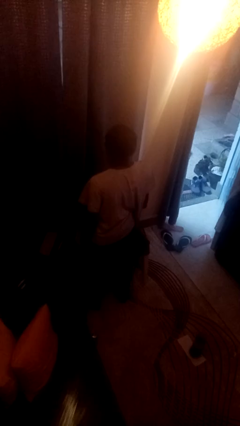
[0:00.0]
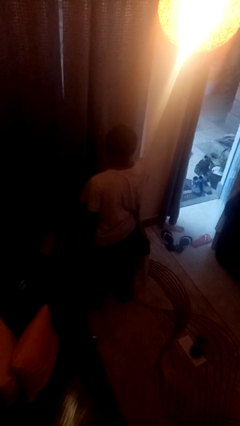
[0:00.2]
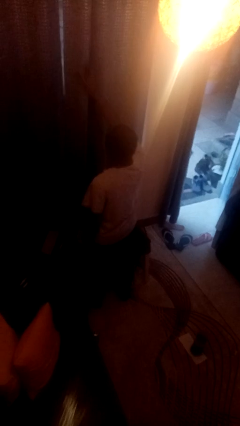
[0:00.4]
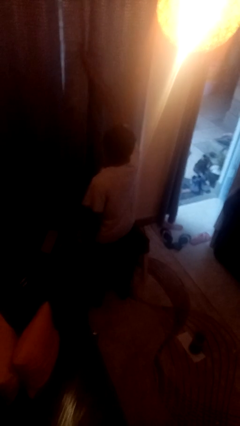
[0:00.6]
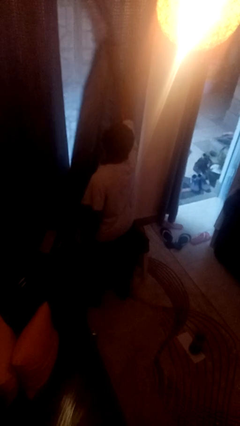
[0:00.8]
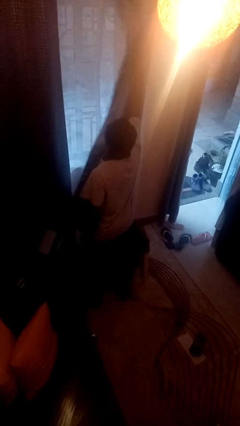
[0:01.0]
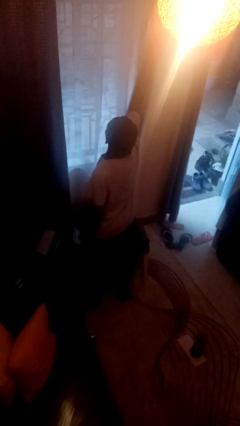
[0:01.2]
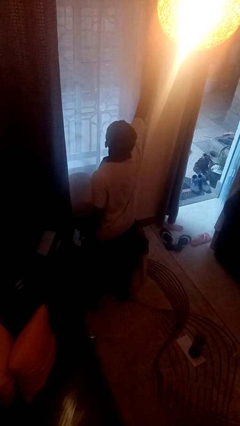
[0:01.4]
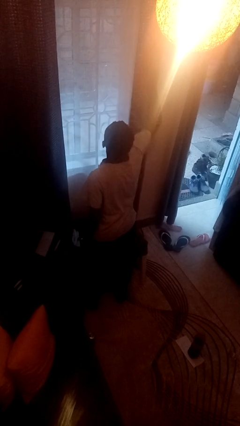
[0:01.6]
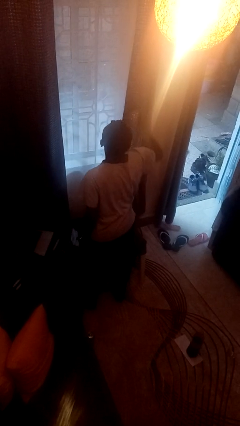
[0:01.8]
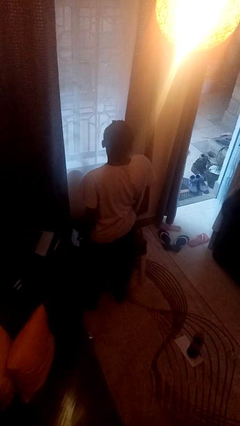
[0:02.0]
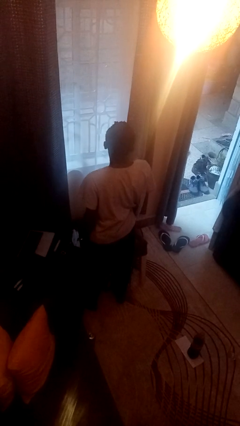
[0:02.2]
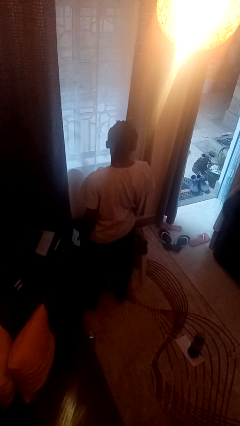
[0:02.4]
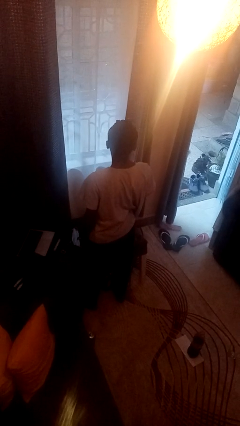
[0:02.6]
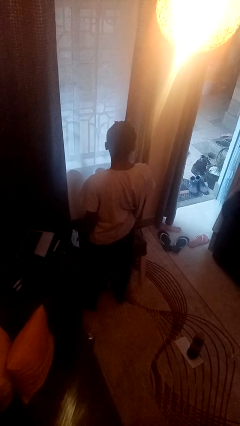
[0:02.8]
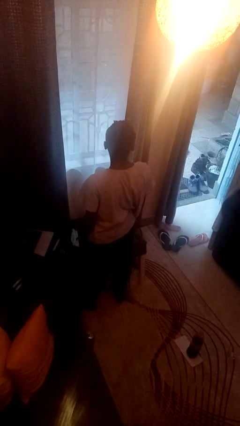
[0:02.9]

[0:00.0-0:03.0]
person opens curtains

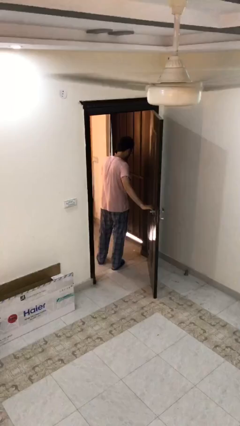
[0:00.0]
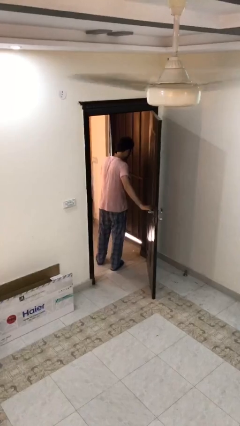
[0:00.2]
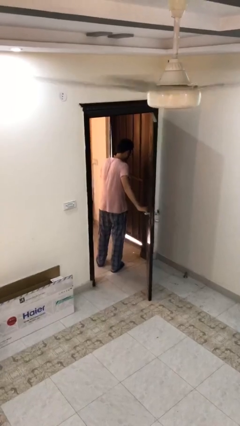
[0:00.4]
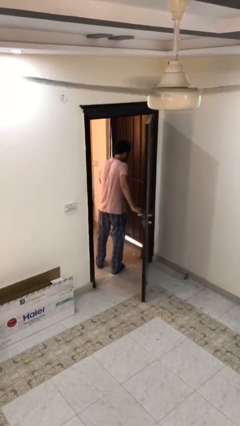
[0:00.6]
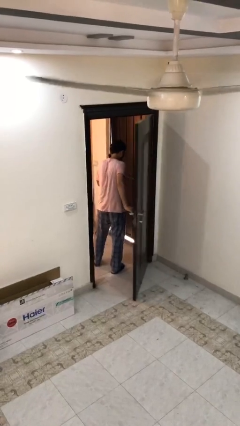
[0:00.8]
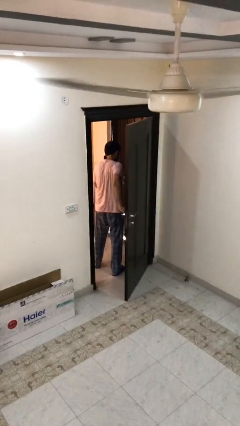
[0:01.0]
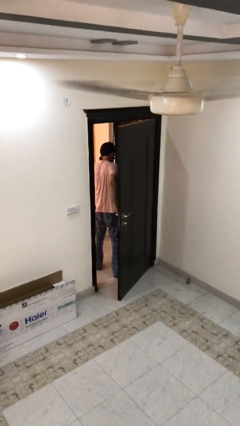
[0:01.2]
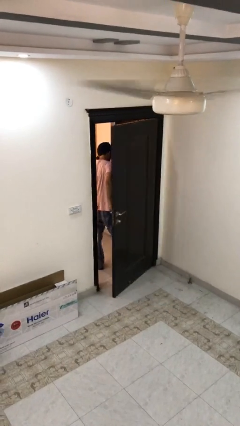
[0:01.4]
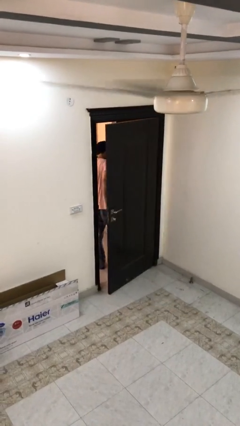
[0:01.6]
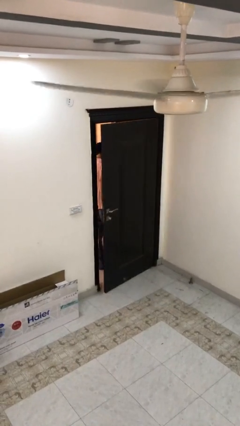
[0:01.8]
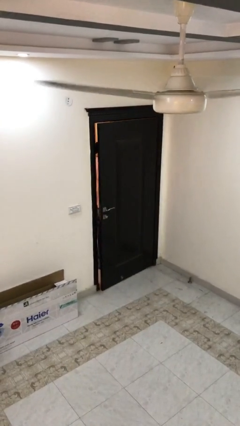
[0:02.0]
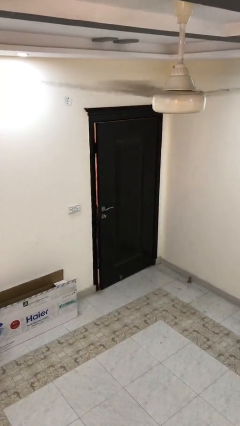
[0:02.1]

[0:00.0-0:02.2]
person closes facility door

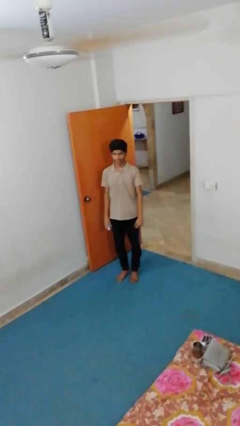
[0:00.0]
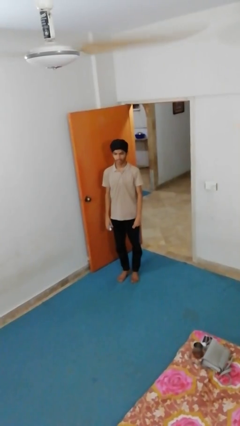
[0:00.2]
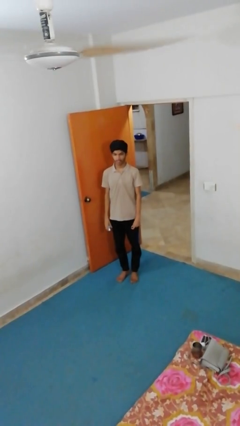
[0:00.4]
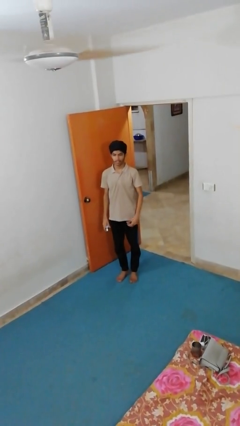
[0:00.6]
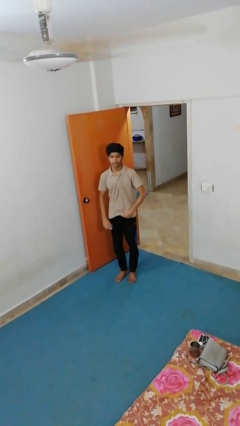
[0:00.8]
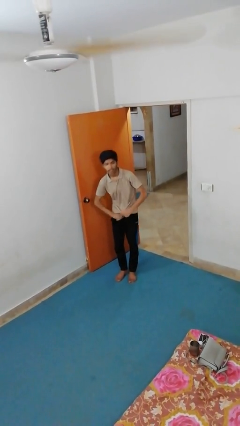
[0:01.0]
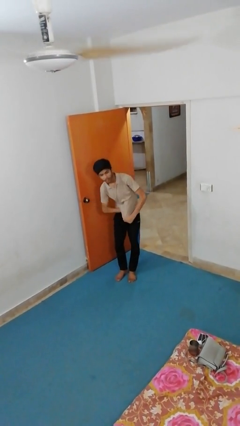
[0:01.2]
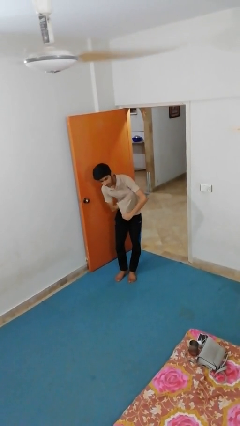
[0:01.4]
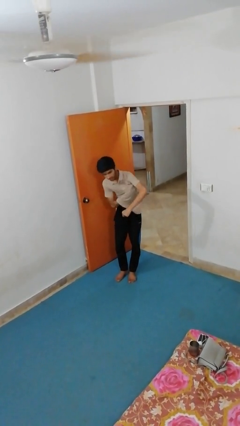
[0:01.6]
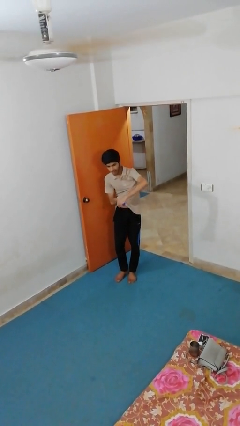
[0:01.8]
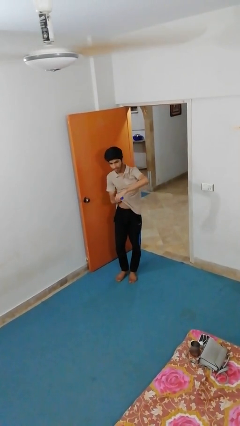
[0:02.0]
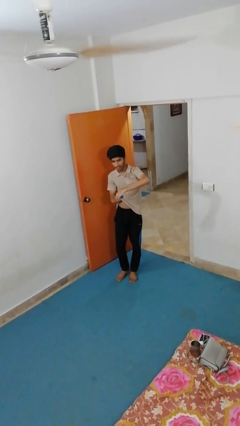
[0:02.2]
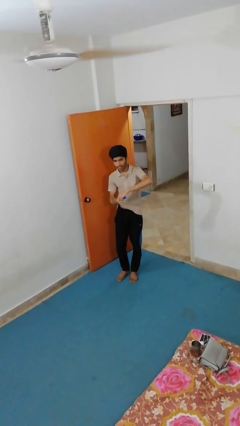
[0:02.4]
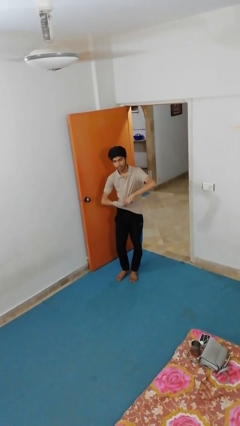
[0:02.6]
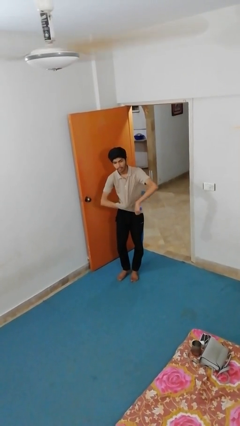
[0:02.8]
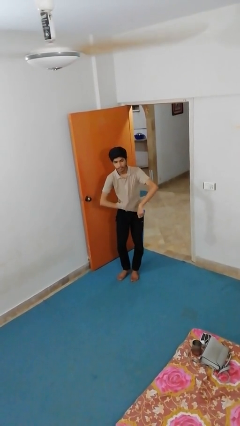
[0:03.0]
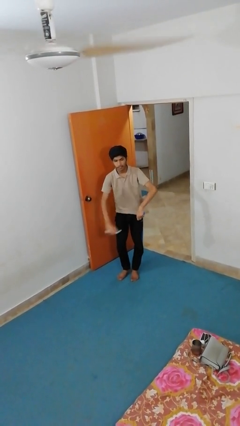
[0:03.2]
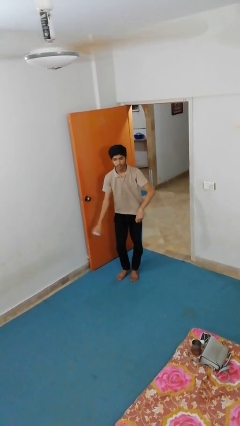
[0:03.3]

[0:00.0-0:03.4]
person applies deodorant

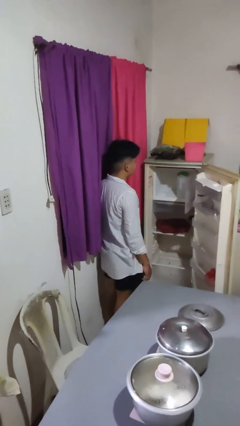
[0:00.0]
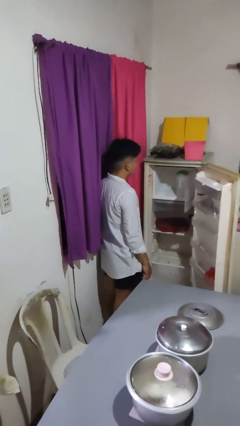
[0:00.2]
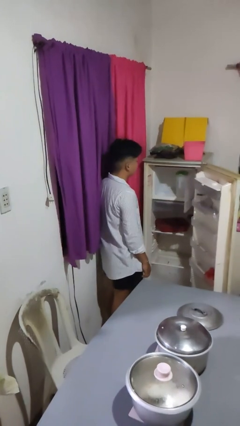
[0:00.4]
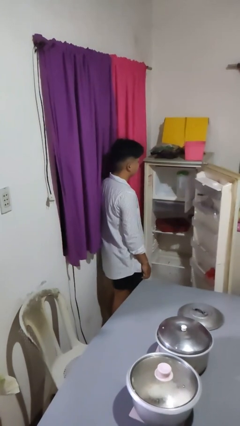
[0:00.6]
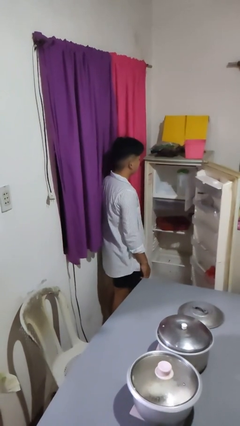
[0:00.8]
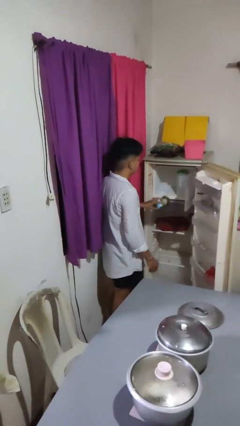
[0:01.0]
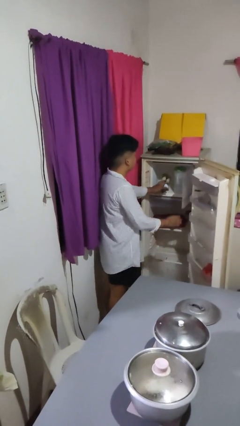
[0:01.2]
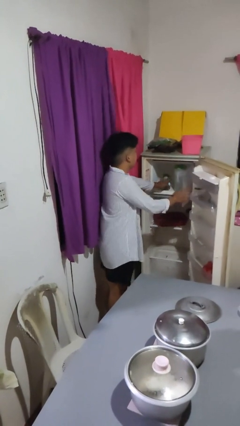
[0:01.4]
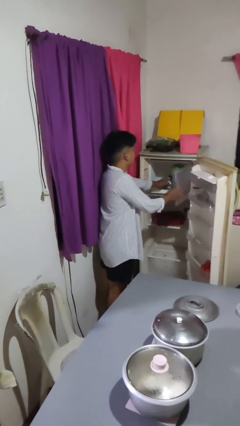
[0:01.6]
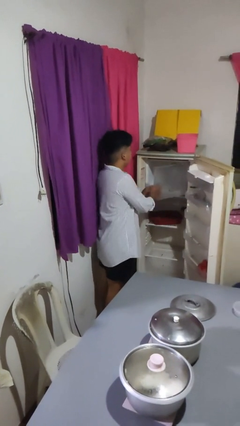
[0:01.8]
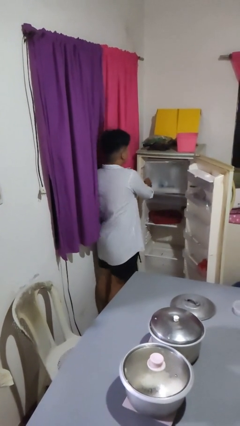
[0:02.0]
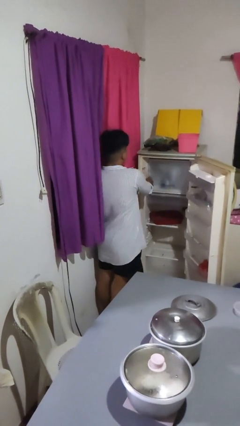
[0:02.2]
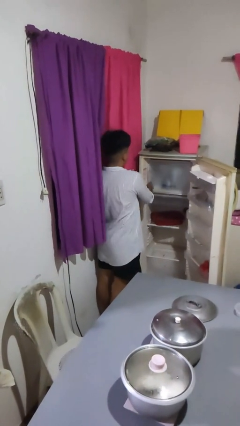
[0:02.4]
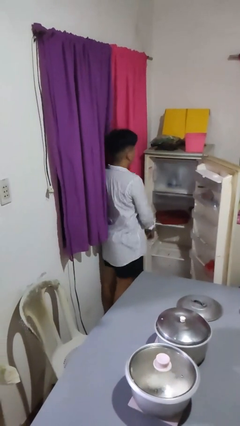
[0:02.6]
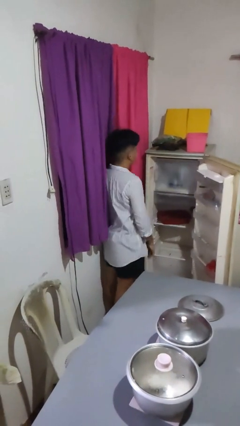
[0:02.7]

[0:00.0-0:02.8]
person puts object into refrigerator

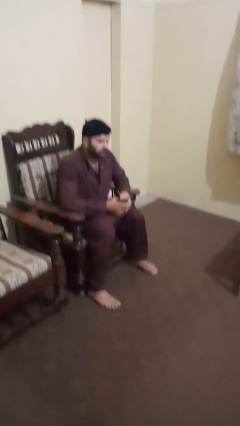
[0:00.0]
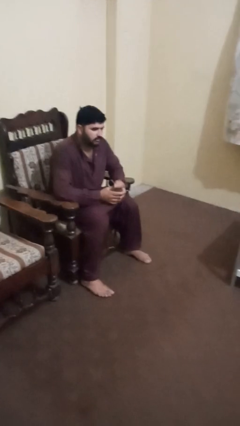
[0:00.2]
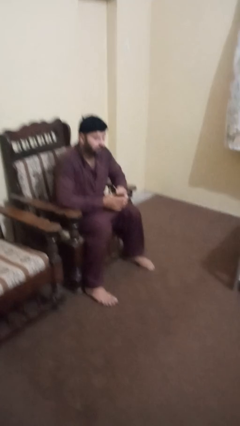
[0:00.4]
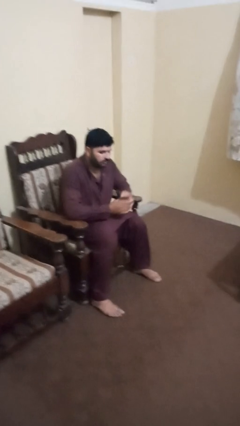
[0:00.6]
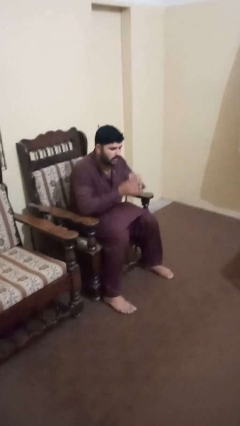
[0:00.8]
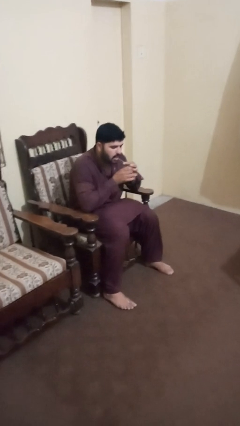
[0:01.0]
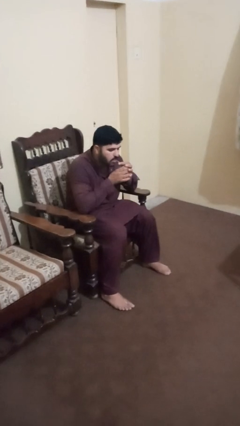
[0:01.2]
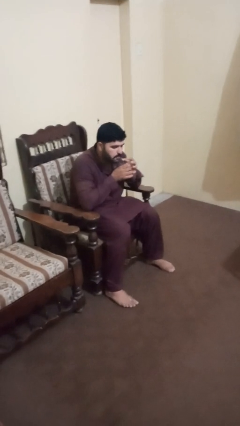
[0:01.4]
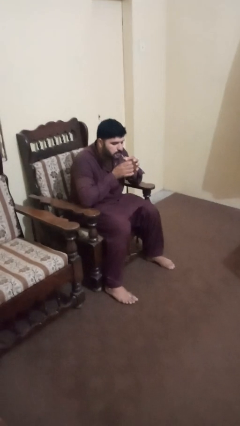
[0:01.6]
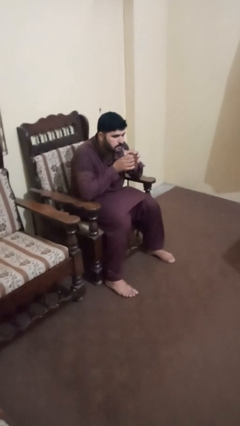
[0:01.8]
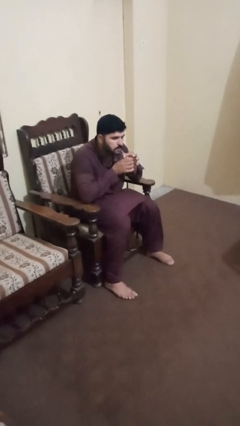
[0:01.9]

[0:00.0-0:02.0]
person drinks from straw

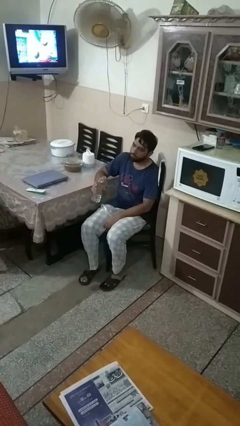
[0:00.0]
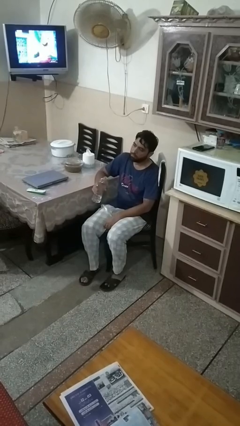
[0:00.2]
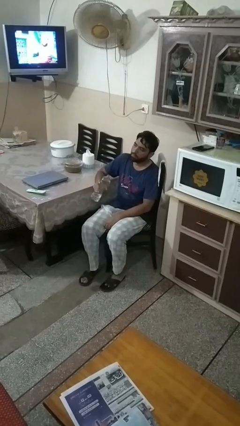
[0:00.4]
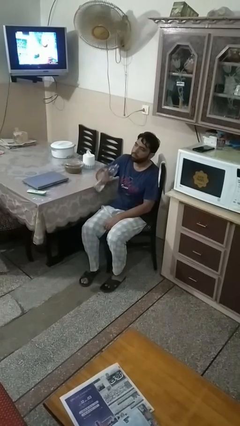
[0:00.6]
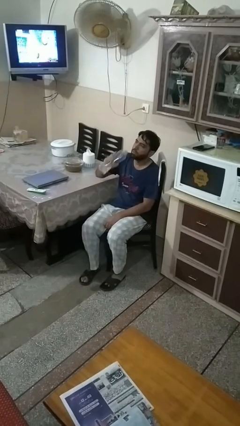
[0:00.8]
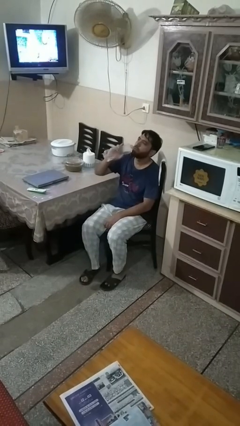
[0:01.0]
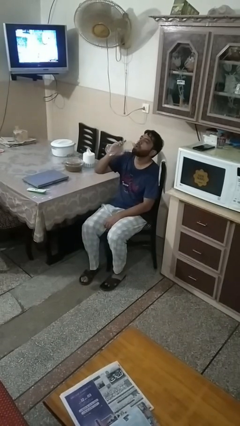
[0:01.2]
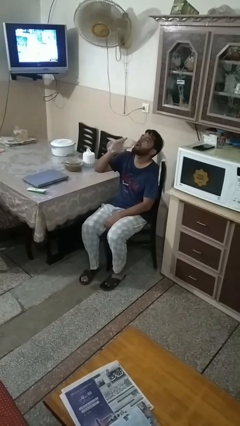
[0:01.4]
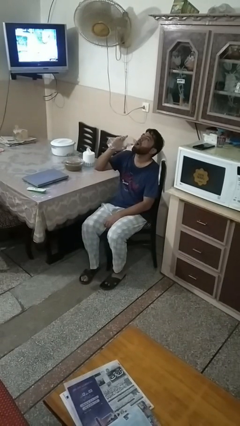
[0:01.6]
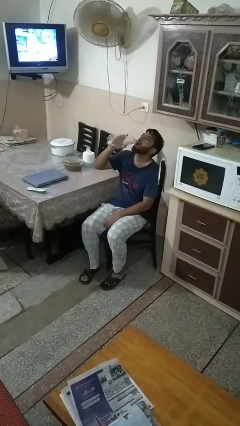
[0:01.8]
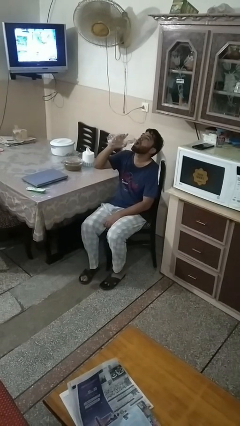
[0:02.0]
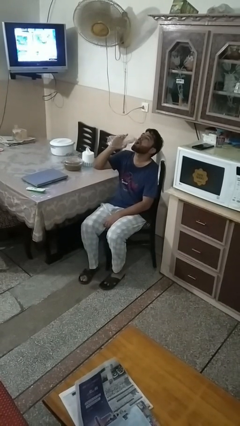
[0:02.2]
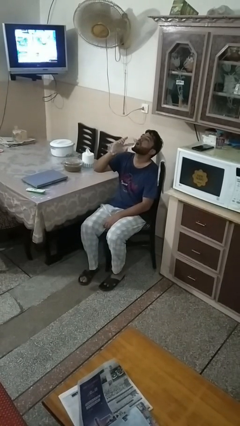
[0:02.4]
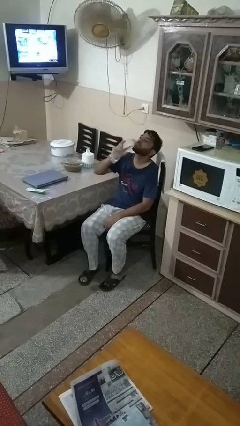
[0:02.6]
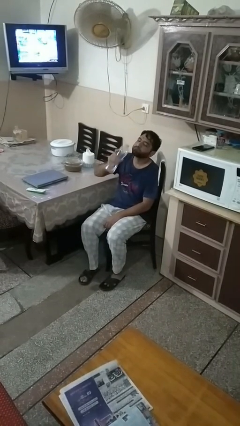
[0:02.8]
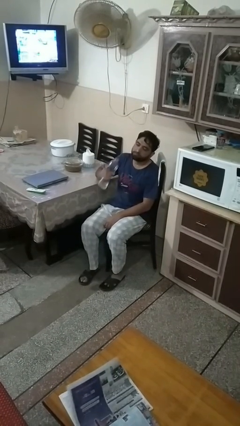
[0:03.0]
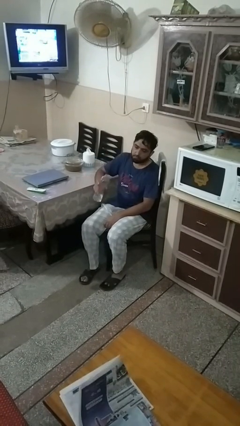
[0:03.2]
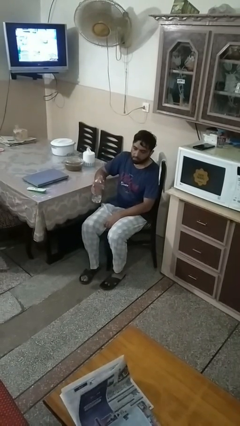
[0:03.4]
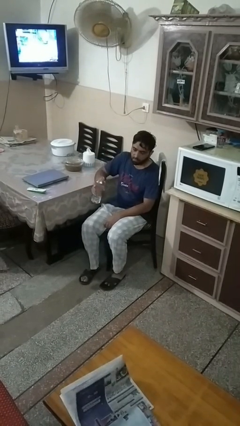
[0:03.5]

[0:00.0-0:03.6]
person drinks from bottle

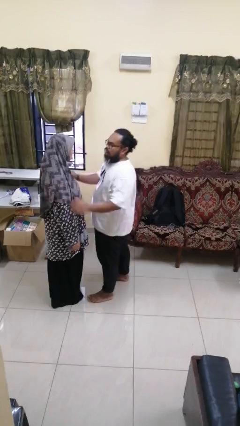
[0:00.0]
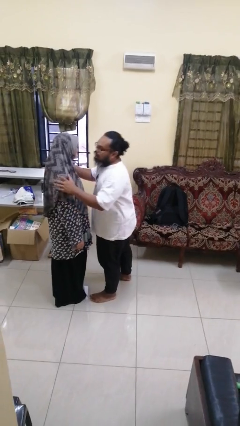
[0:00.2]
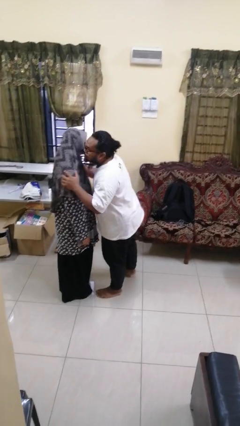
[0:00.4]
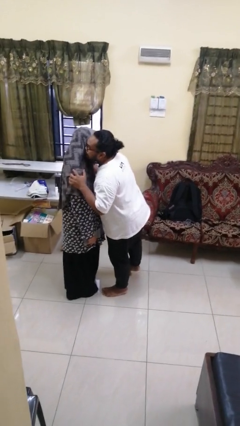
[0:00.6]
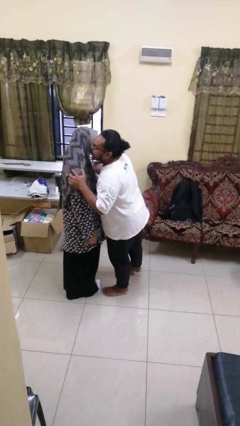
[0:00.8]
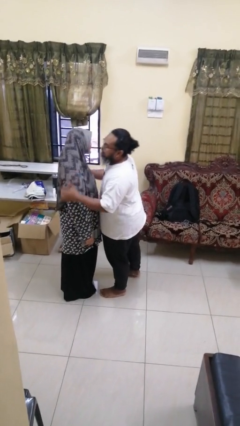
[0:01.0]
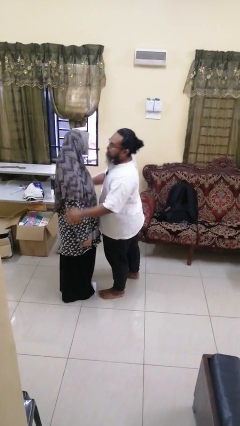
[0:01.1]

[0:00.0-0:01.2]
person kisses cheek of person
